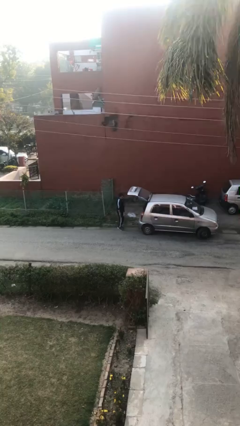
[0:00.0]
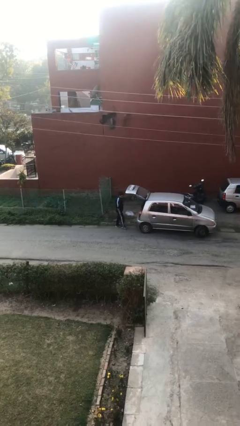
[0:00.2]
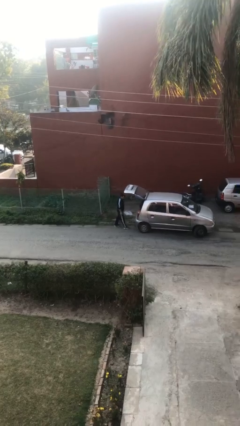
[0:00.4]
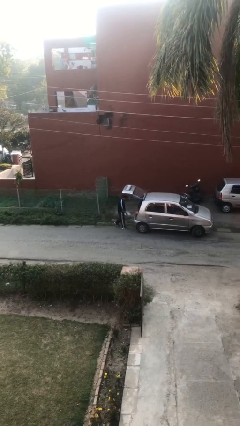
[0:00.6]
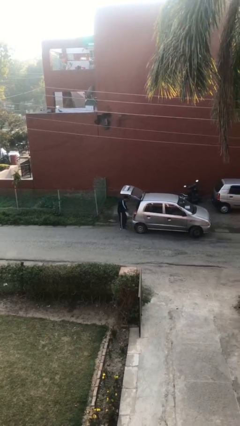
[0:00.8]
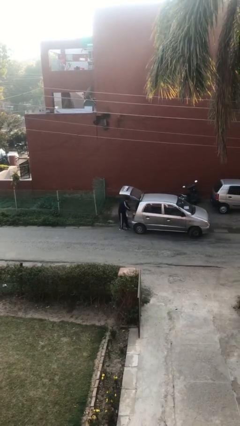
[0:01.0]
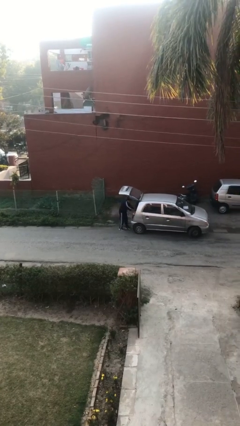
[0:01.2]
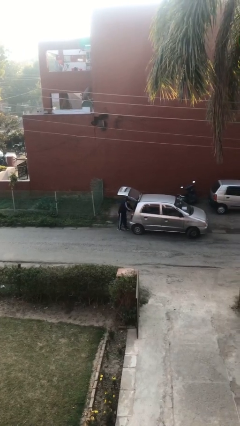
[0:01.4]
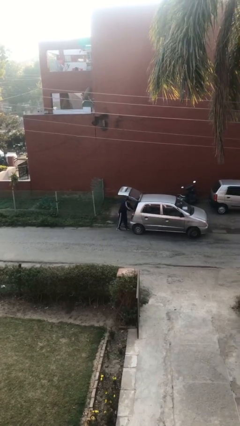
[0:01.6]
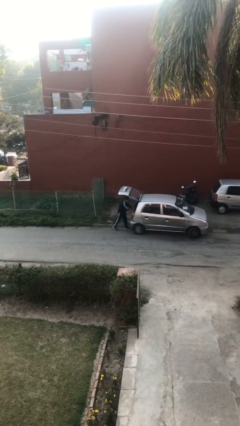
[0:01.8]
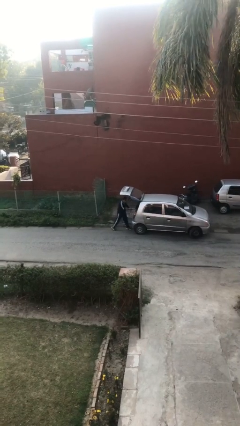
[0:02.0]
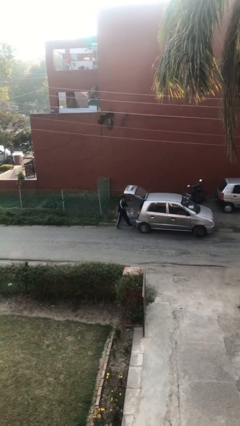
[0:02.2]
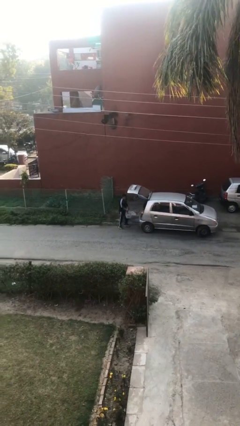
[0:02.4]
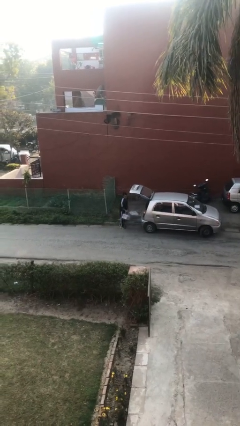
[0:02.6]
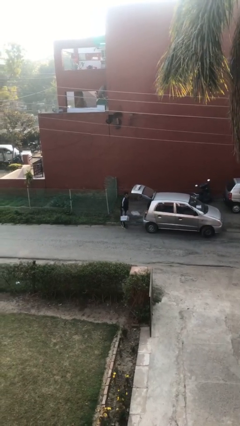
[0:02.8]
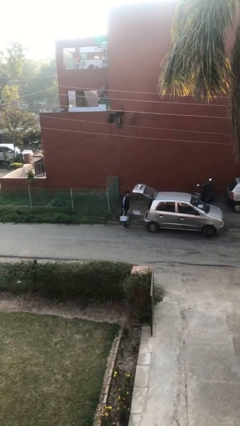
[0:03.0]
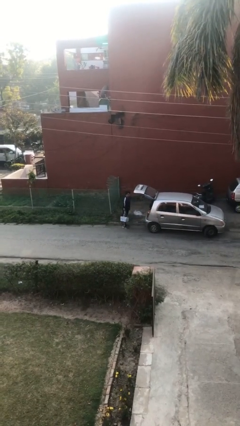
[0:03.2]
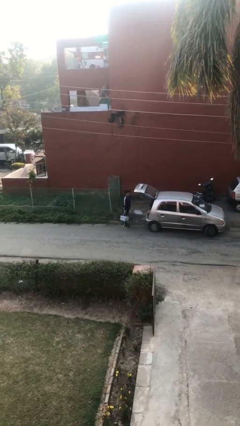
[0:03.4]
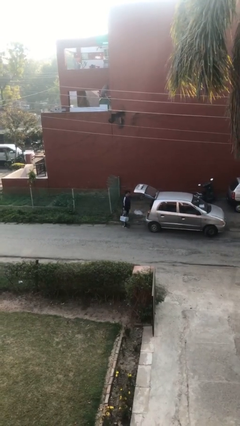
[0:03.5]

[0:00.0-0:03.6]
person unloads car

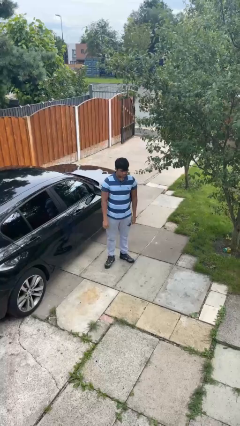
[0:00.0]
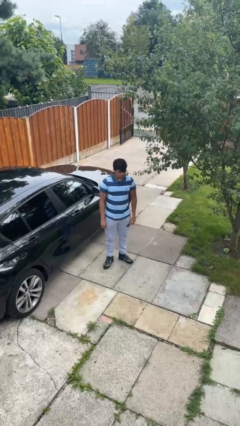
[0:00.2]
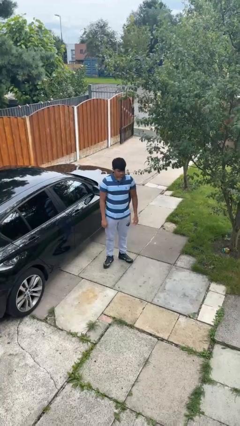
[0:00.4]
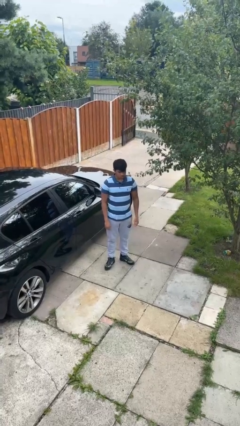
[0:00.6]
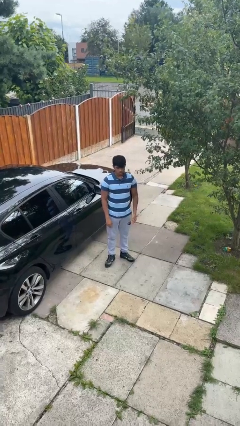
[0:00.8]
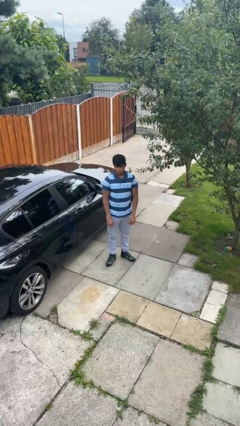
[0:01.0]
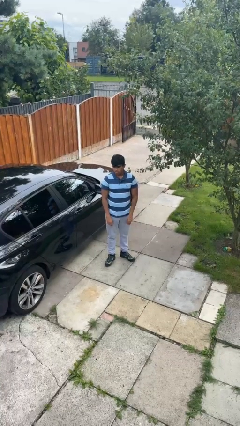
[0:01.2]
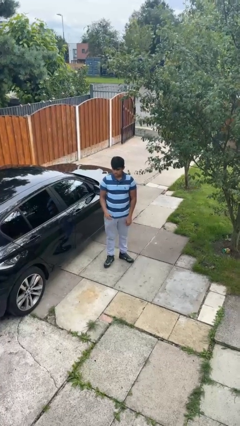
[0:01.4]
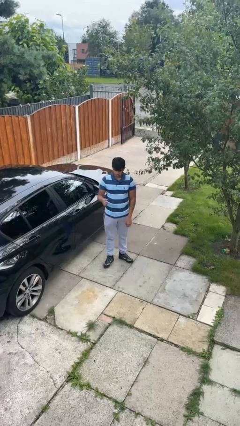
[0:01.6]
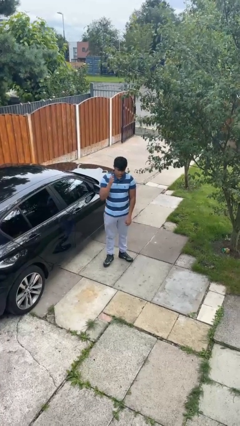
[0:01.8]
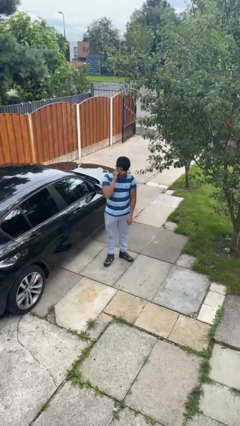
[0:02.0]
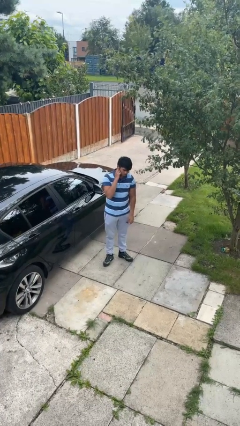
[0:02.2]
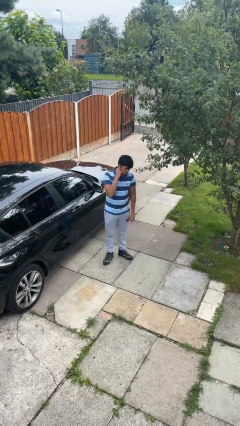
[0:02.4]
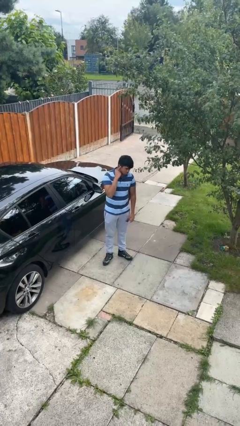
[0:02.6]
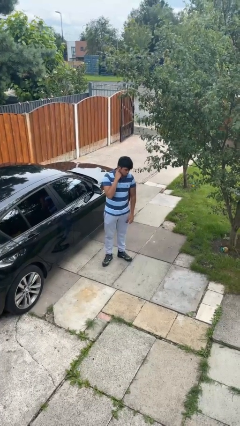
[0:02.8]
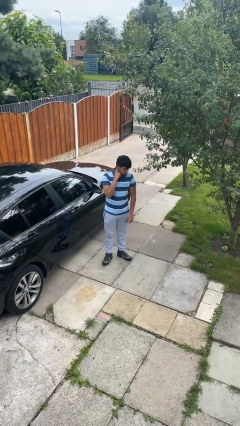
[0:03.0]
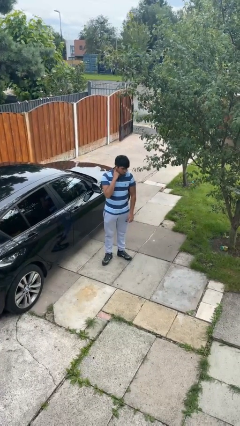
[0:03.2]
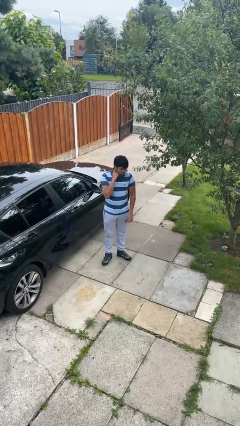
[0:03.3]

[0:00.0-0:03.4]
person puts fingers in ear

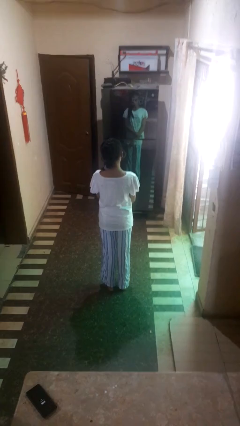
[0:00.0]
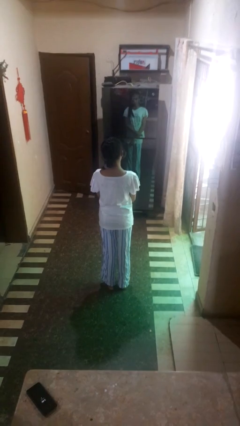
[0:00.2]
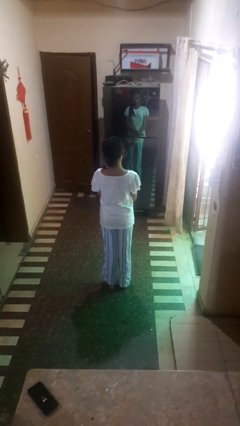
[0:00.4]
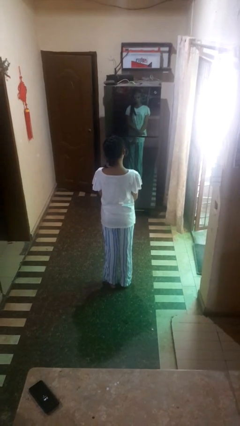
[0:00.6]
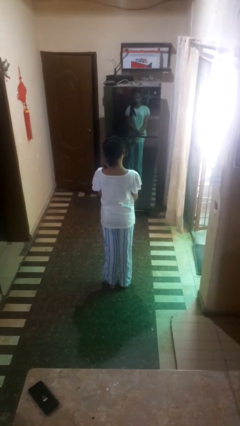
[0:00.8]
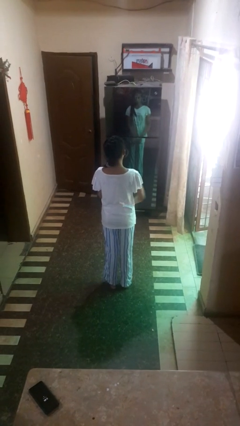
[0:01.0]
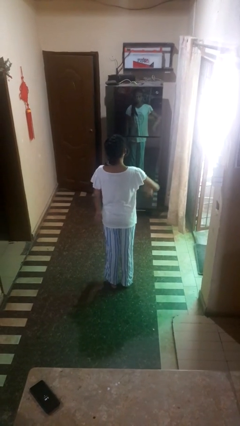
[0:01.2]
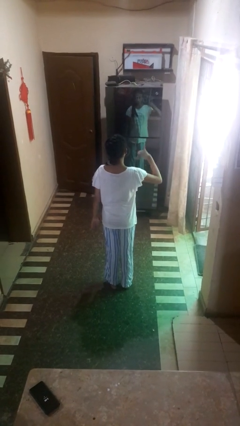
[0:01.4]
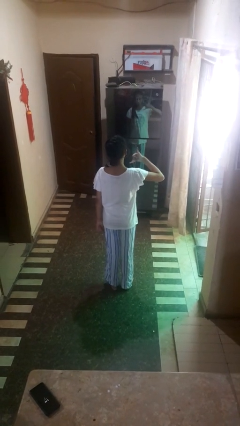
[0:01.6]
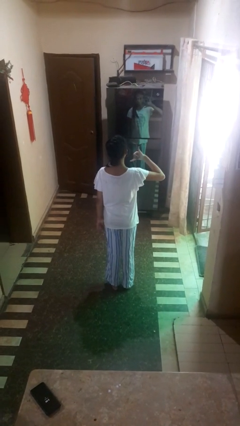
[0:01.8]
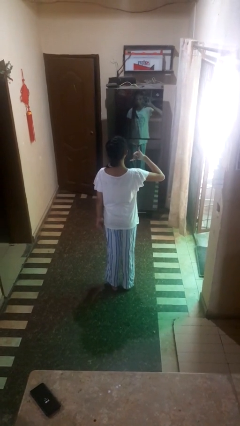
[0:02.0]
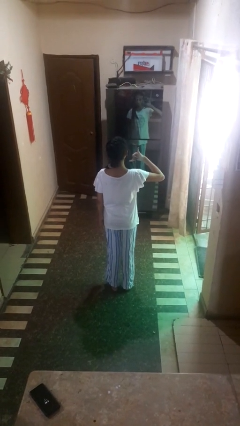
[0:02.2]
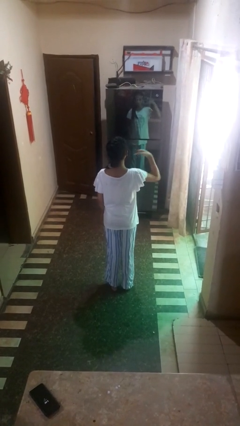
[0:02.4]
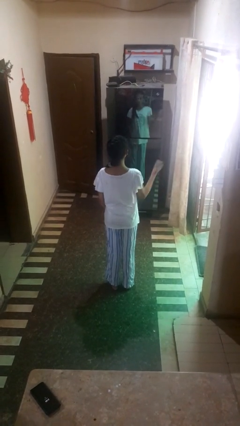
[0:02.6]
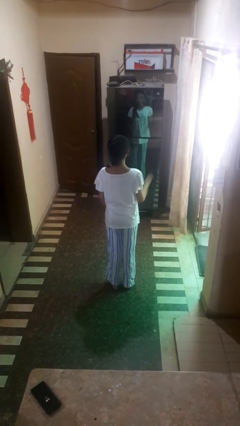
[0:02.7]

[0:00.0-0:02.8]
person gestures call me

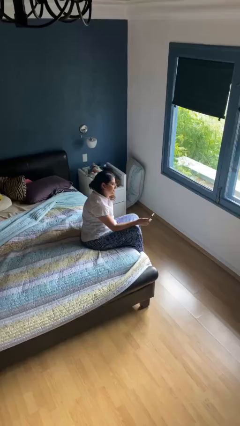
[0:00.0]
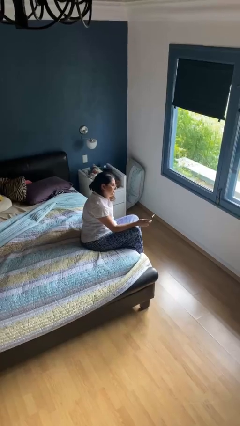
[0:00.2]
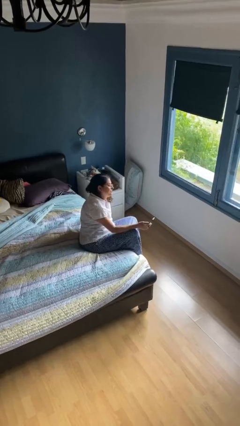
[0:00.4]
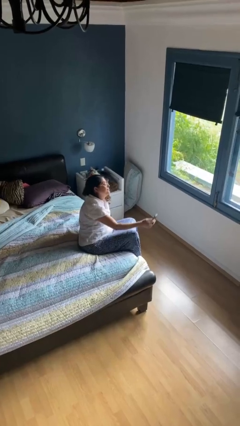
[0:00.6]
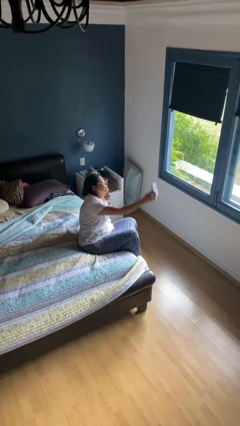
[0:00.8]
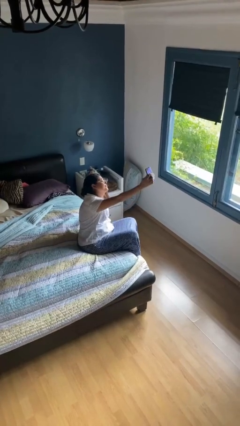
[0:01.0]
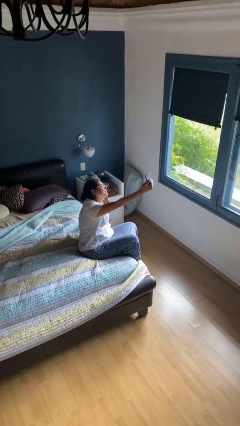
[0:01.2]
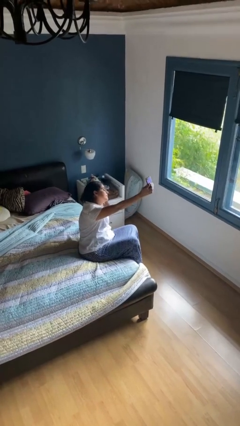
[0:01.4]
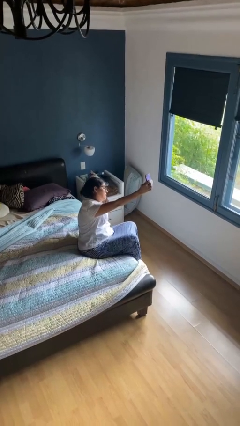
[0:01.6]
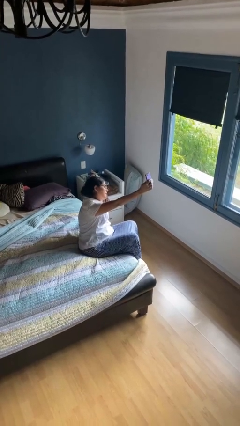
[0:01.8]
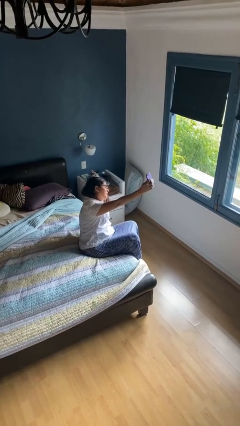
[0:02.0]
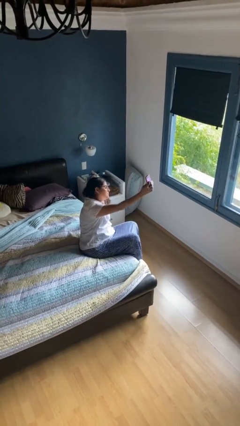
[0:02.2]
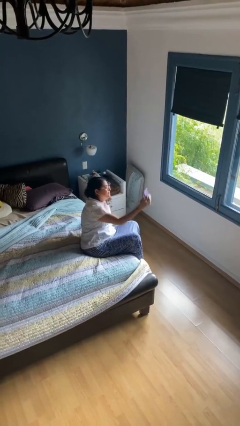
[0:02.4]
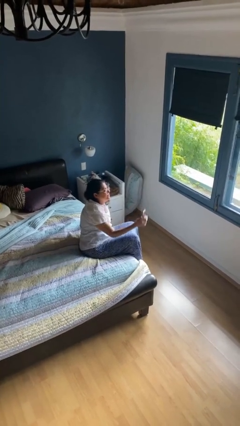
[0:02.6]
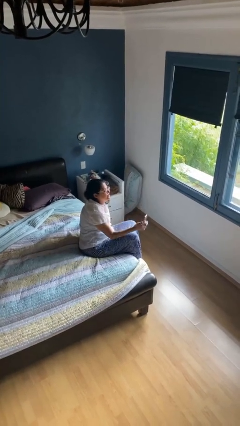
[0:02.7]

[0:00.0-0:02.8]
person takes selfie

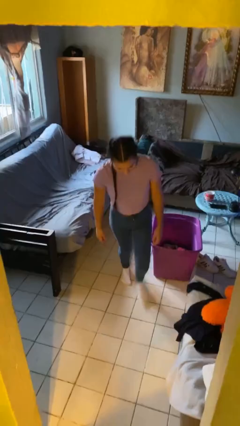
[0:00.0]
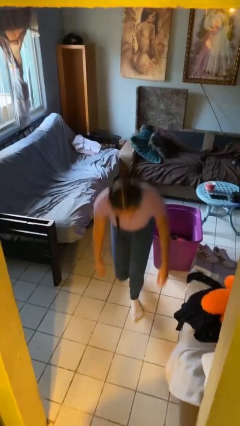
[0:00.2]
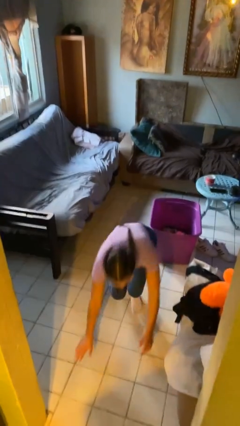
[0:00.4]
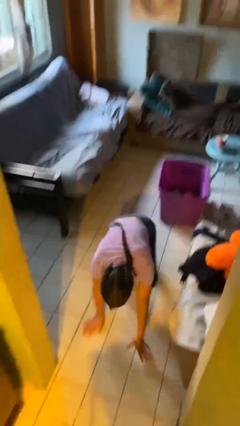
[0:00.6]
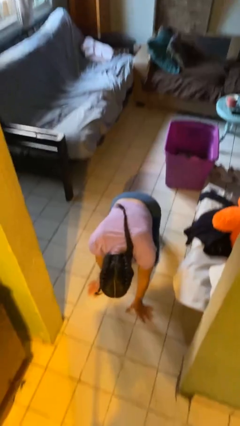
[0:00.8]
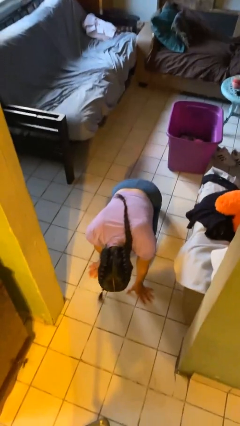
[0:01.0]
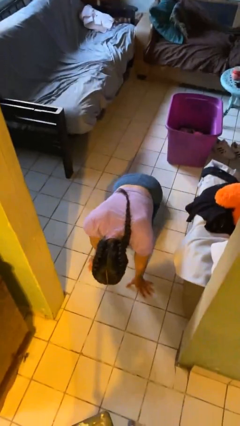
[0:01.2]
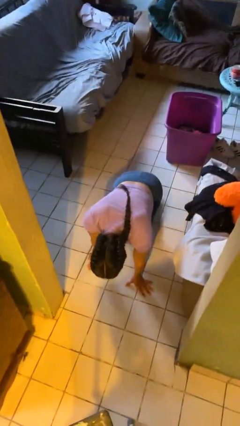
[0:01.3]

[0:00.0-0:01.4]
person lies down on floor

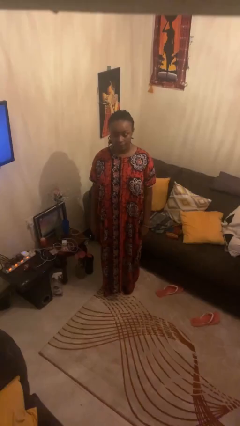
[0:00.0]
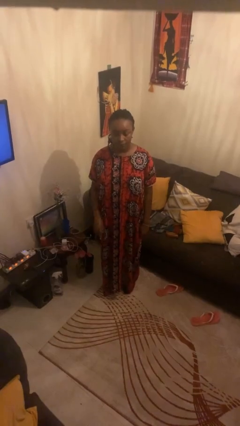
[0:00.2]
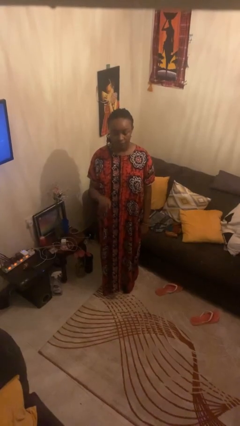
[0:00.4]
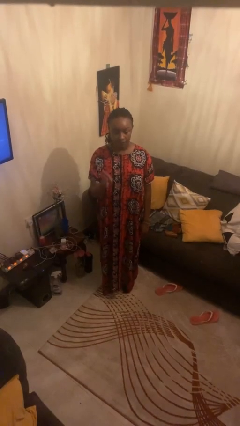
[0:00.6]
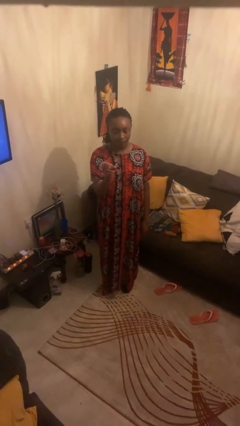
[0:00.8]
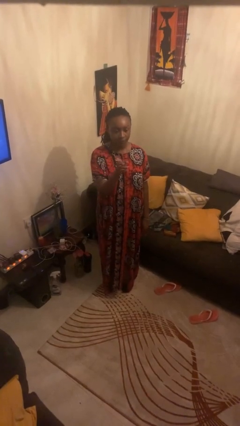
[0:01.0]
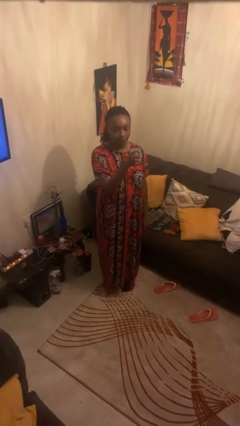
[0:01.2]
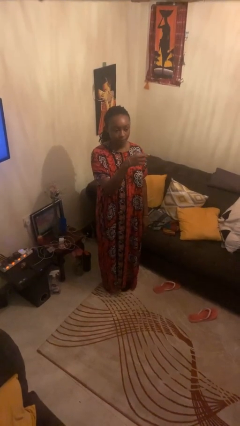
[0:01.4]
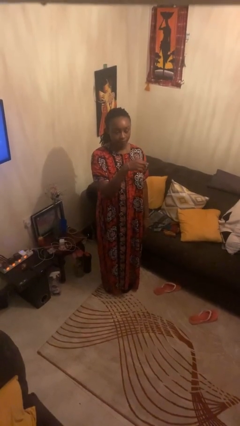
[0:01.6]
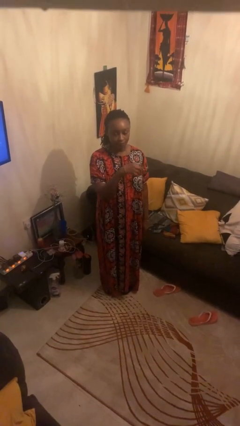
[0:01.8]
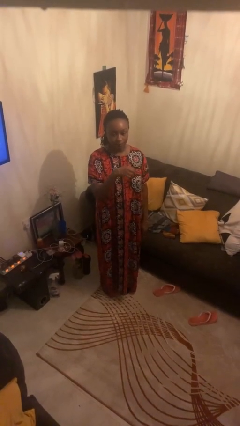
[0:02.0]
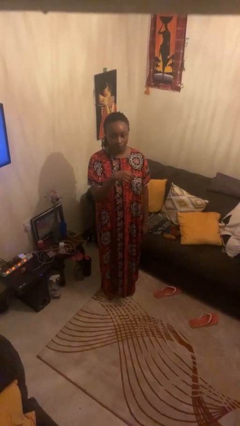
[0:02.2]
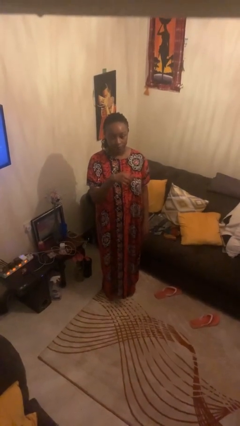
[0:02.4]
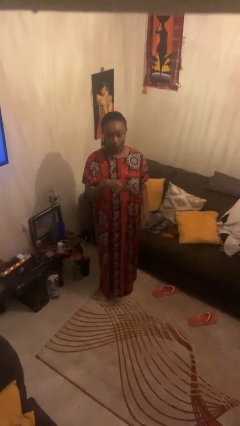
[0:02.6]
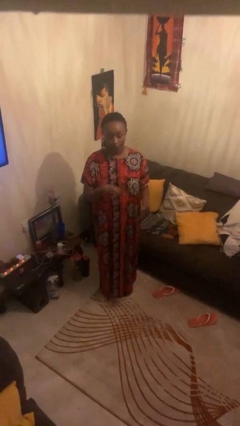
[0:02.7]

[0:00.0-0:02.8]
person gestures swipe left
